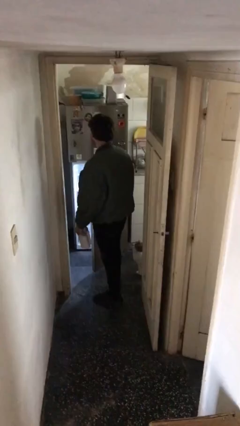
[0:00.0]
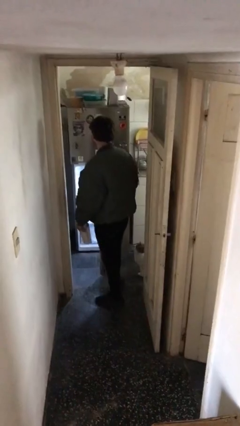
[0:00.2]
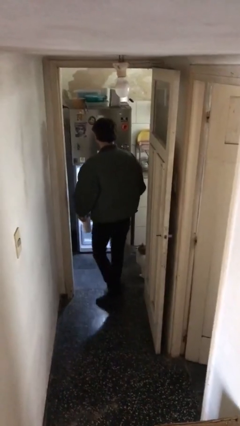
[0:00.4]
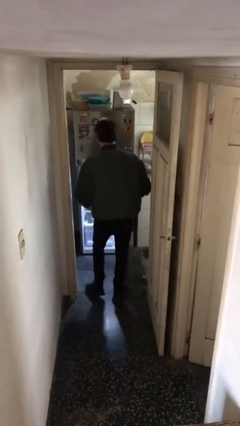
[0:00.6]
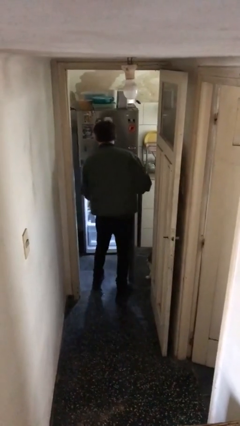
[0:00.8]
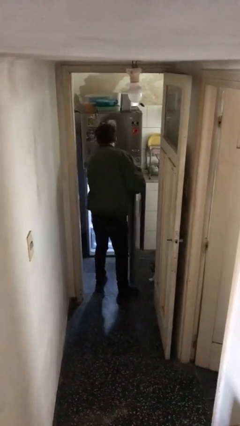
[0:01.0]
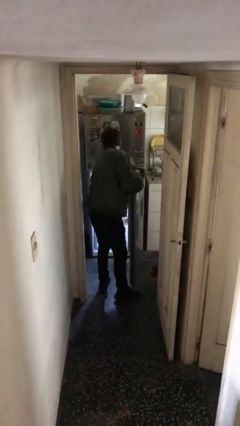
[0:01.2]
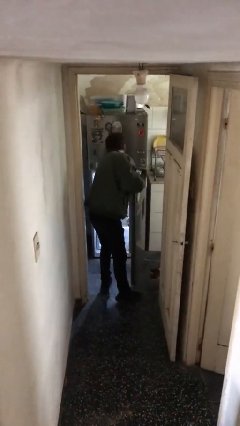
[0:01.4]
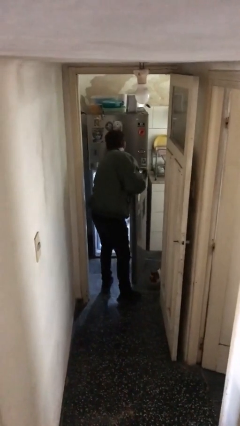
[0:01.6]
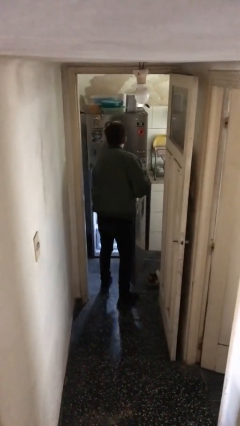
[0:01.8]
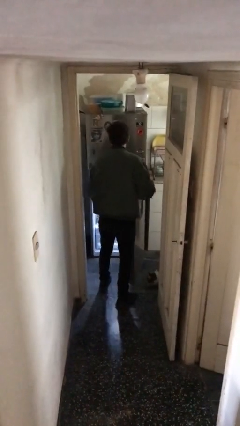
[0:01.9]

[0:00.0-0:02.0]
person puts object into refrigerator

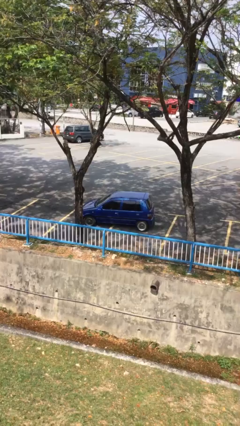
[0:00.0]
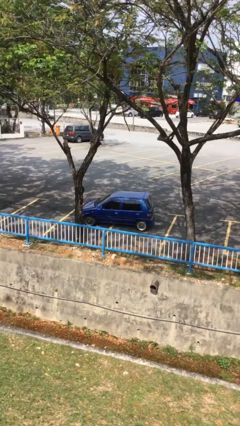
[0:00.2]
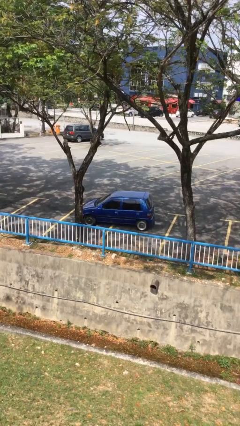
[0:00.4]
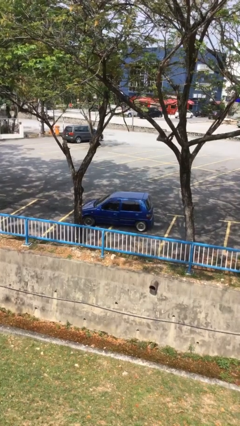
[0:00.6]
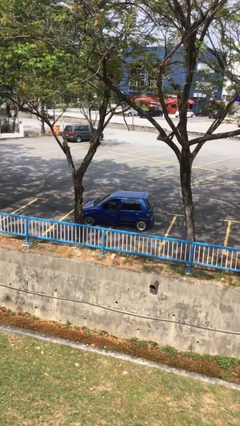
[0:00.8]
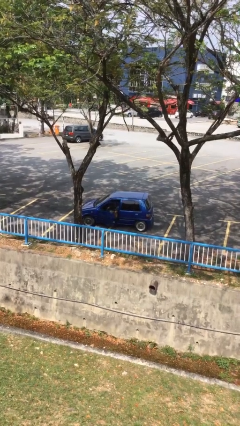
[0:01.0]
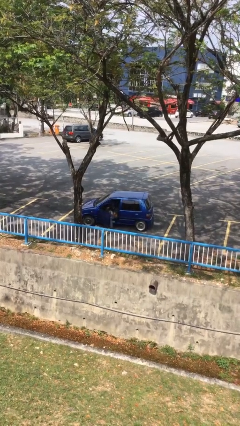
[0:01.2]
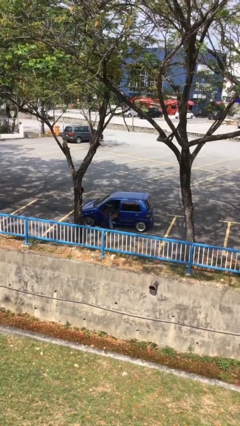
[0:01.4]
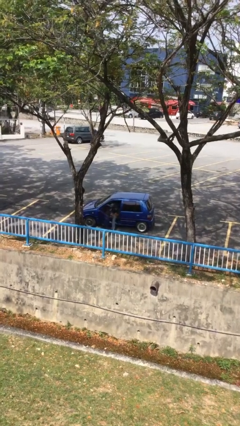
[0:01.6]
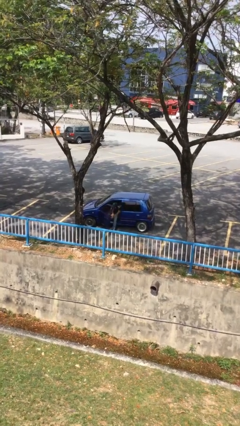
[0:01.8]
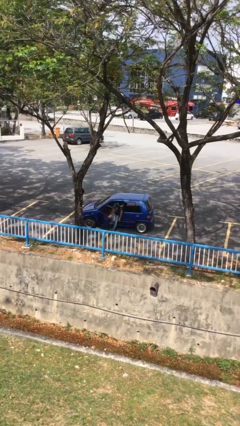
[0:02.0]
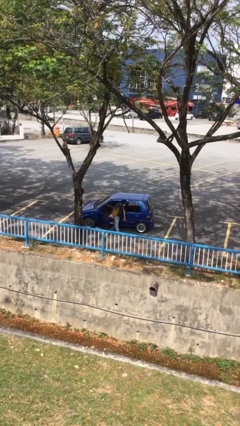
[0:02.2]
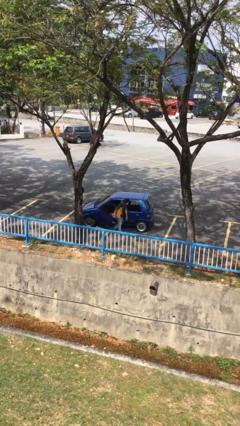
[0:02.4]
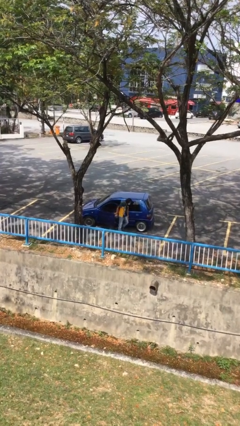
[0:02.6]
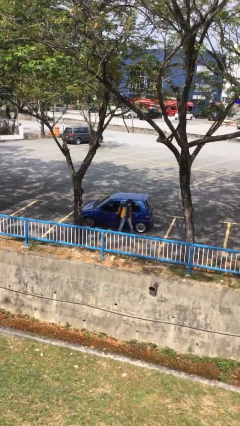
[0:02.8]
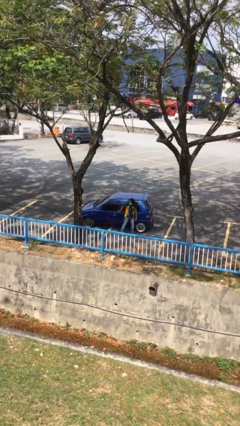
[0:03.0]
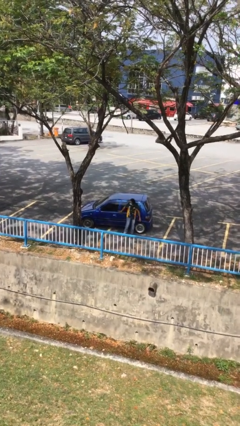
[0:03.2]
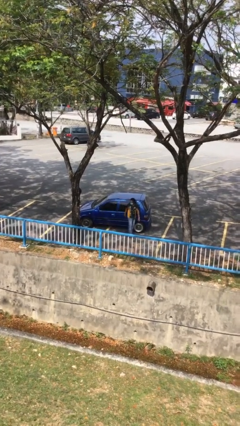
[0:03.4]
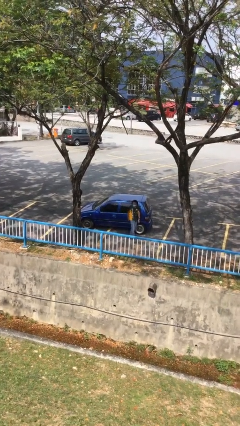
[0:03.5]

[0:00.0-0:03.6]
car drops off person

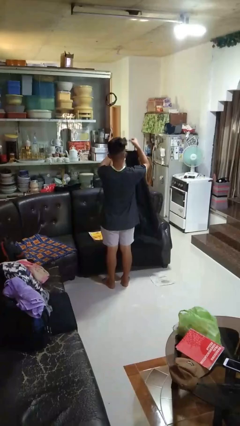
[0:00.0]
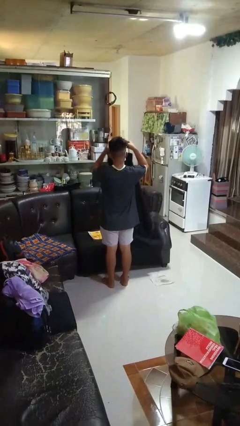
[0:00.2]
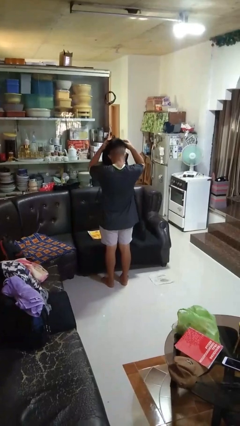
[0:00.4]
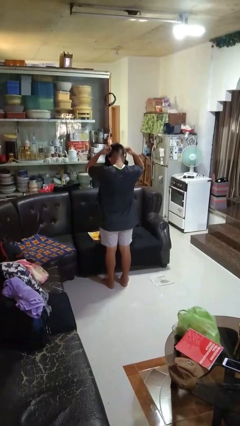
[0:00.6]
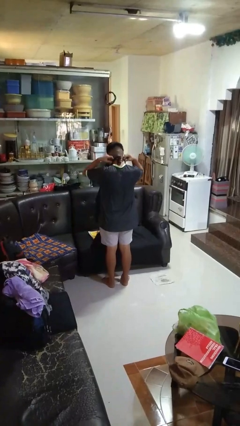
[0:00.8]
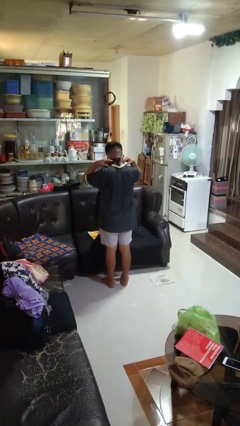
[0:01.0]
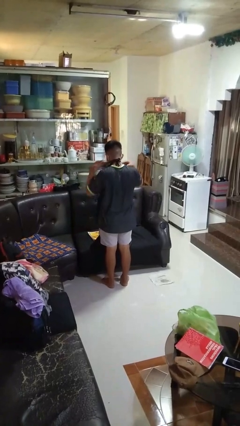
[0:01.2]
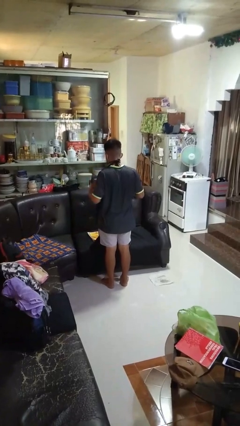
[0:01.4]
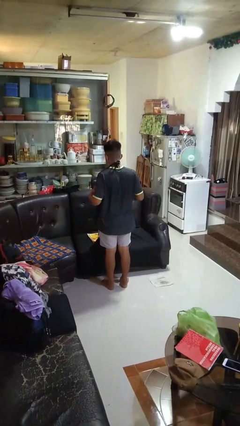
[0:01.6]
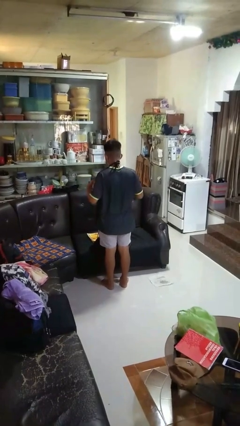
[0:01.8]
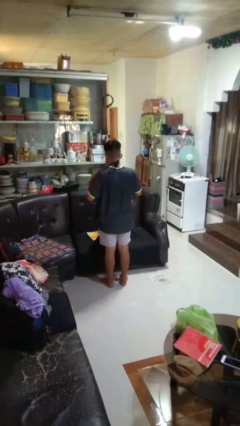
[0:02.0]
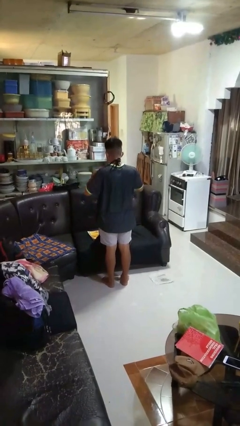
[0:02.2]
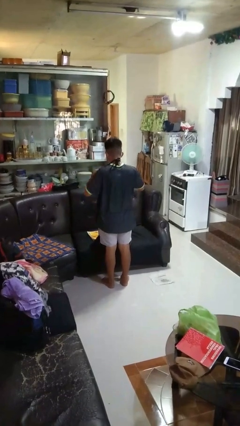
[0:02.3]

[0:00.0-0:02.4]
person puts on apron

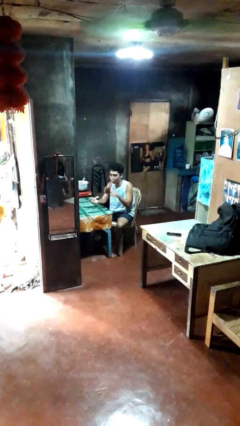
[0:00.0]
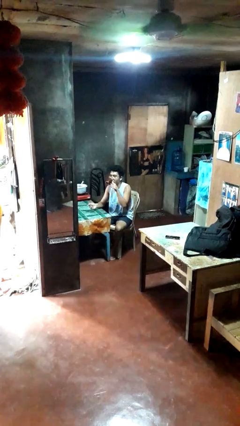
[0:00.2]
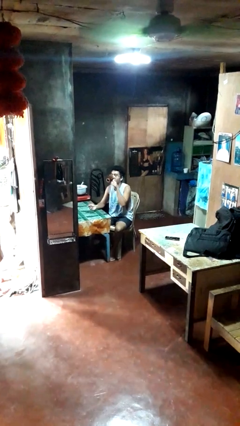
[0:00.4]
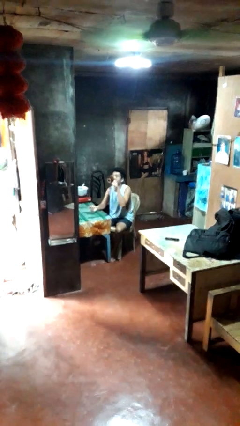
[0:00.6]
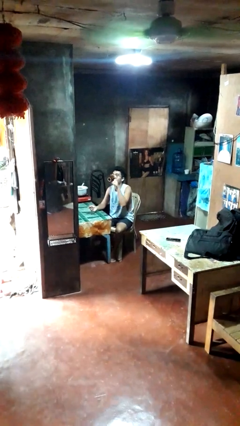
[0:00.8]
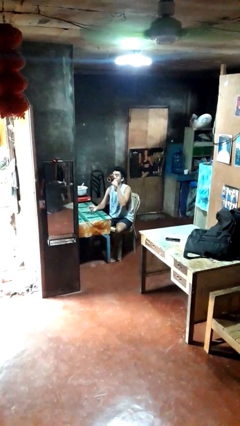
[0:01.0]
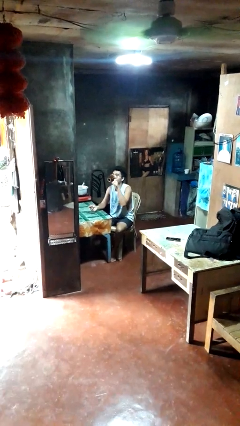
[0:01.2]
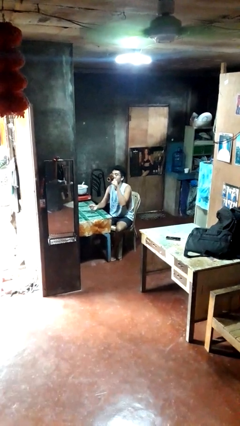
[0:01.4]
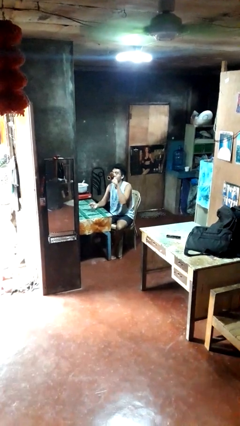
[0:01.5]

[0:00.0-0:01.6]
person drinks from mug

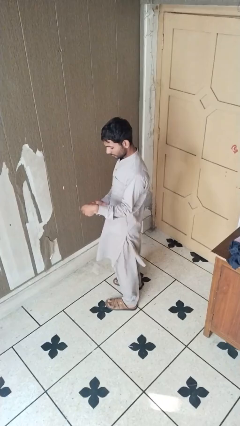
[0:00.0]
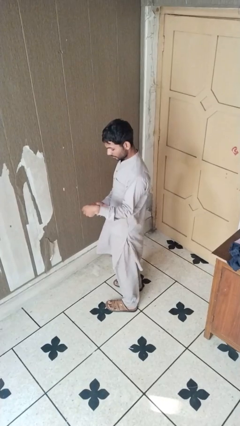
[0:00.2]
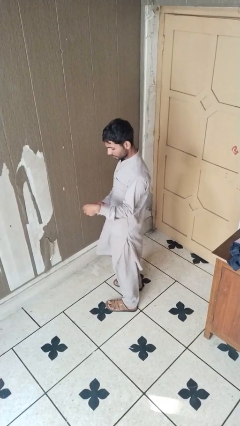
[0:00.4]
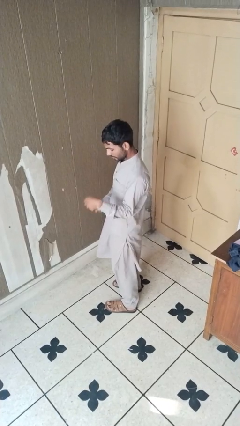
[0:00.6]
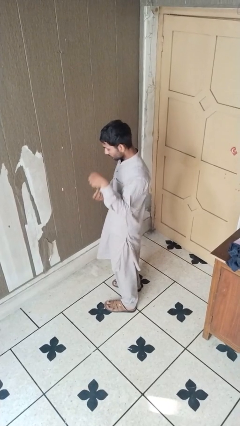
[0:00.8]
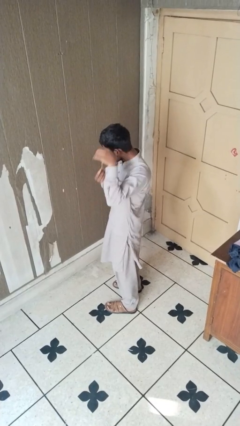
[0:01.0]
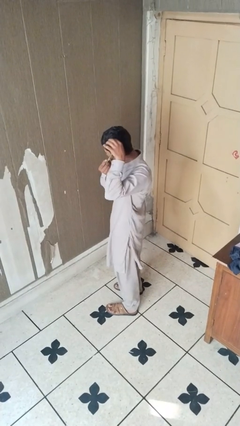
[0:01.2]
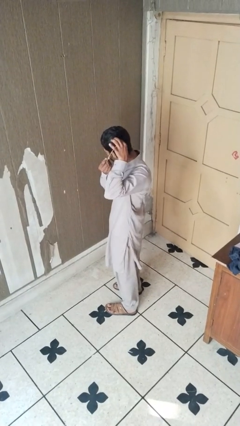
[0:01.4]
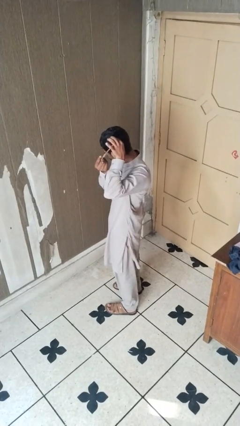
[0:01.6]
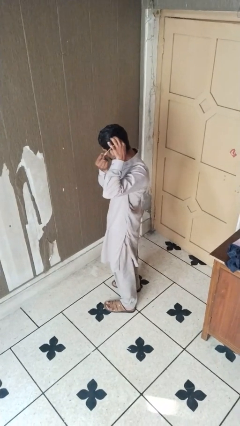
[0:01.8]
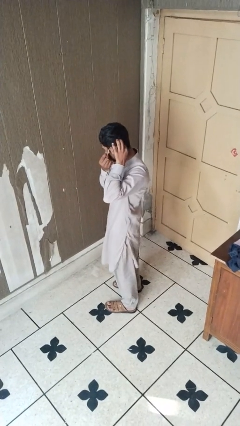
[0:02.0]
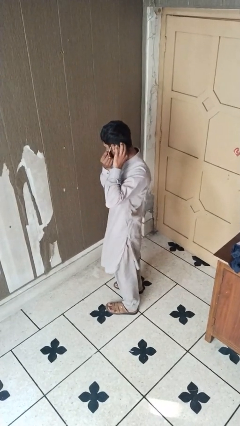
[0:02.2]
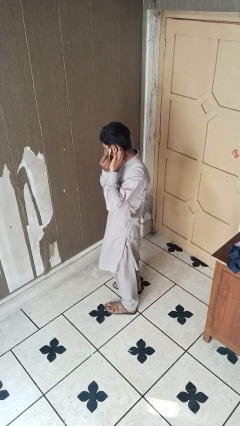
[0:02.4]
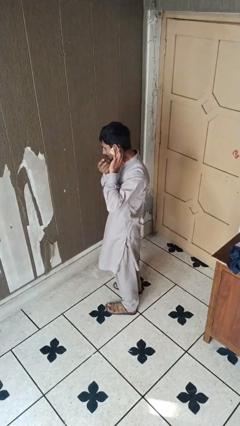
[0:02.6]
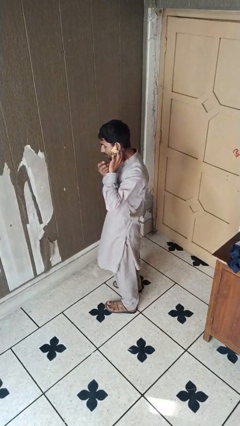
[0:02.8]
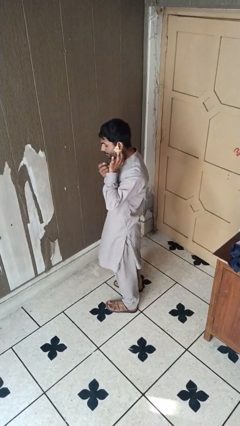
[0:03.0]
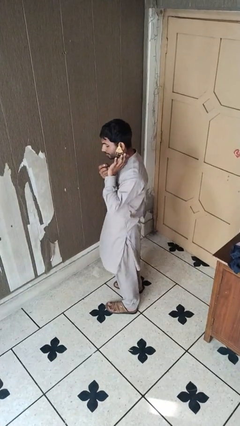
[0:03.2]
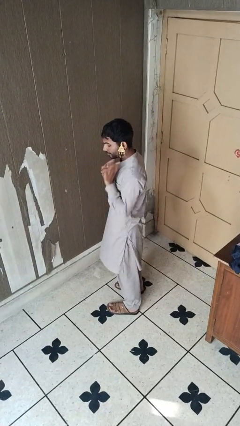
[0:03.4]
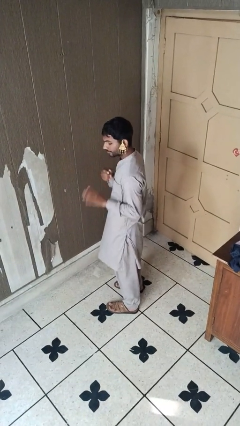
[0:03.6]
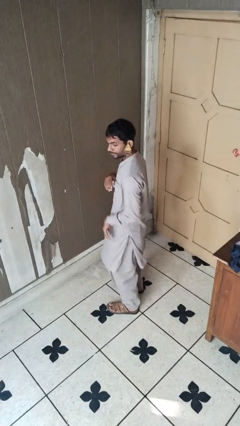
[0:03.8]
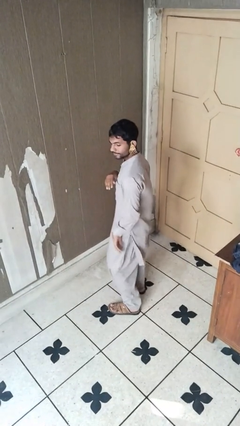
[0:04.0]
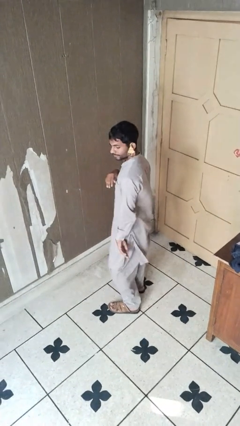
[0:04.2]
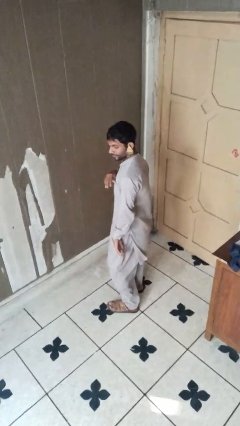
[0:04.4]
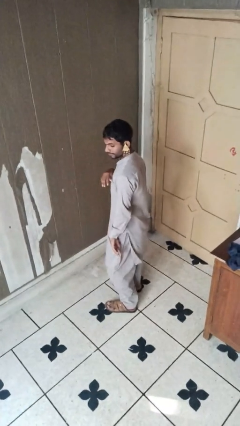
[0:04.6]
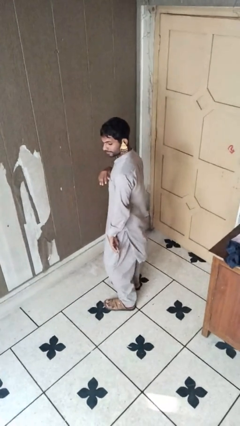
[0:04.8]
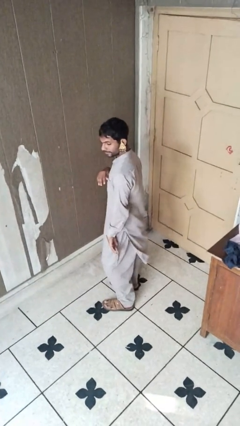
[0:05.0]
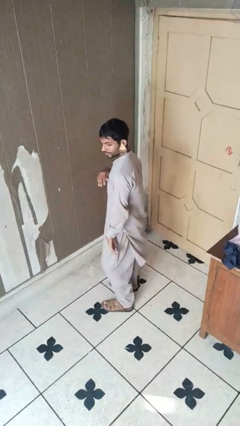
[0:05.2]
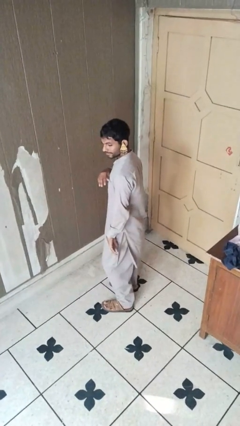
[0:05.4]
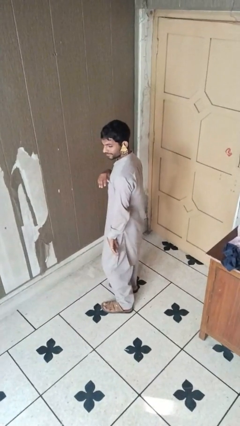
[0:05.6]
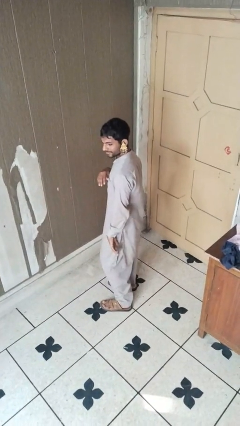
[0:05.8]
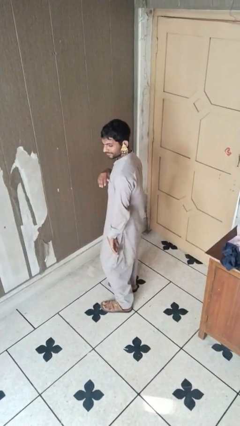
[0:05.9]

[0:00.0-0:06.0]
person puts on earrings

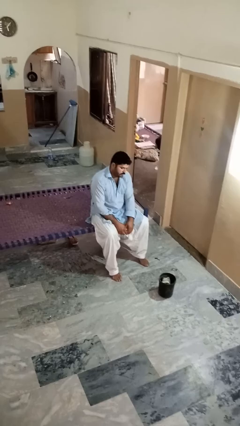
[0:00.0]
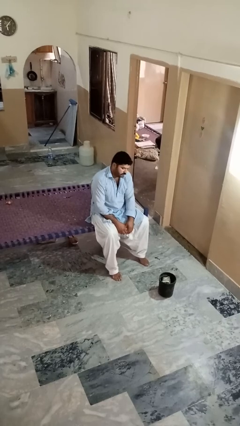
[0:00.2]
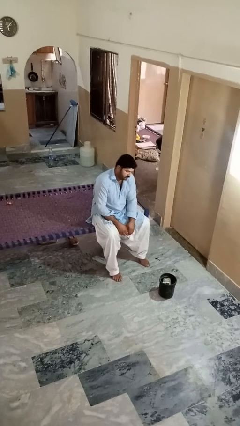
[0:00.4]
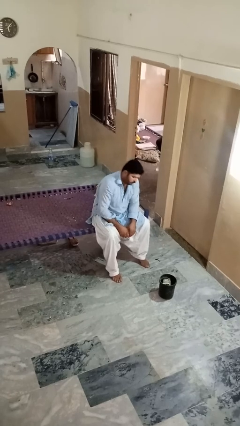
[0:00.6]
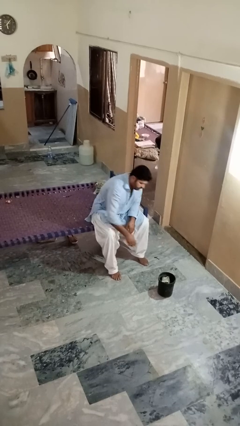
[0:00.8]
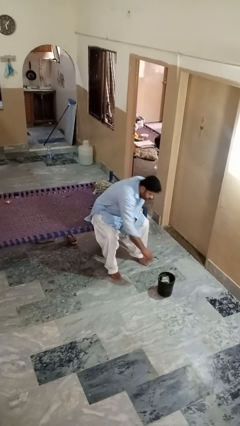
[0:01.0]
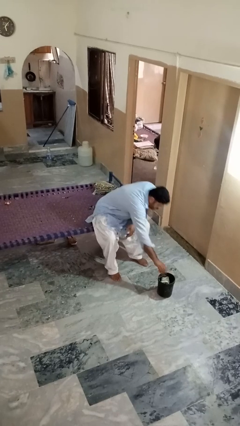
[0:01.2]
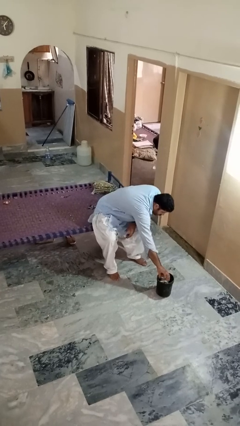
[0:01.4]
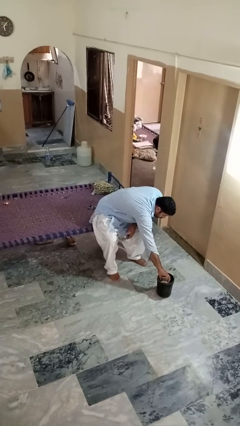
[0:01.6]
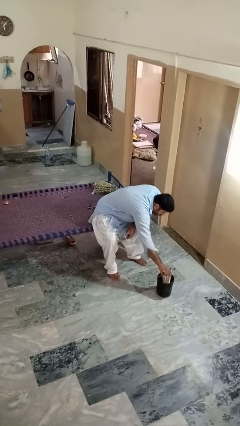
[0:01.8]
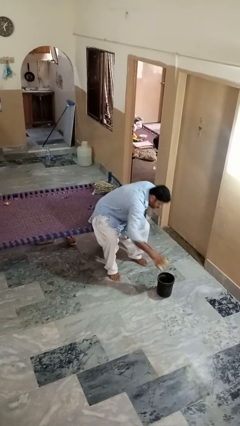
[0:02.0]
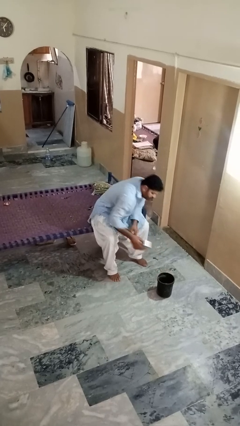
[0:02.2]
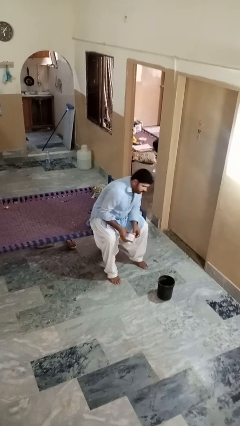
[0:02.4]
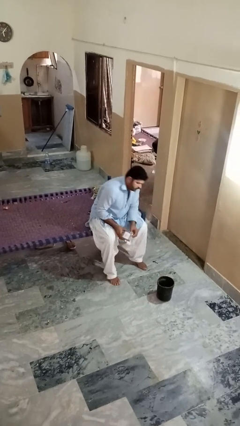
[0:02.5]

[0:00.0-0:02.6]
person takes object from basket
